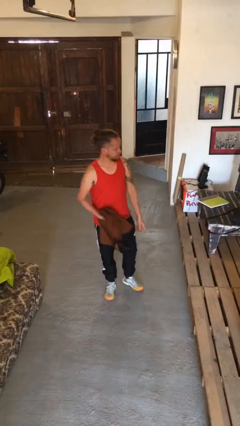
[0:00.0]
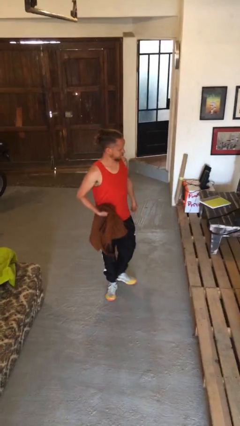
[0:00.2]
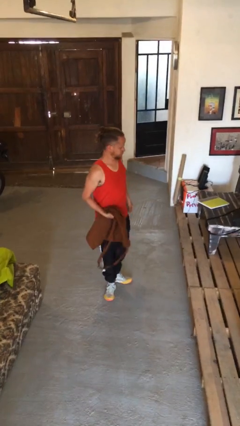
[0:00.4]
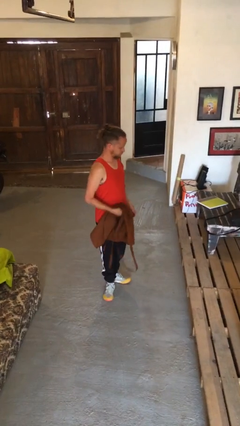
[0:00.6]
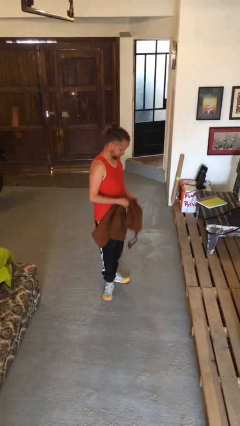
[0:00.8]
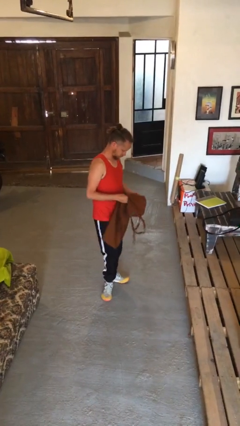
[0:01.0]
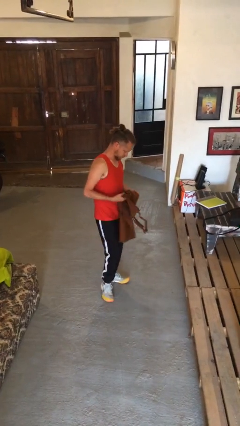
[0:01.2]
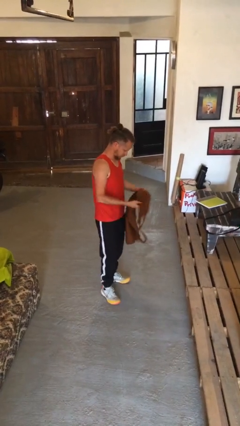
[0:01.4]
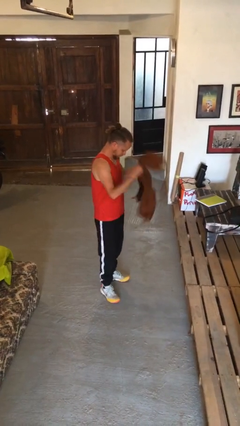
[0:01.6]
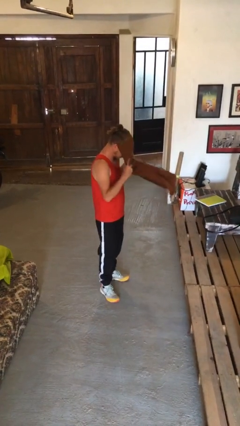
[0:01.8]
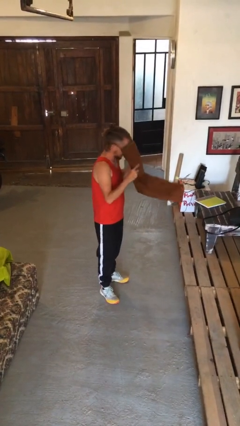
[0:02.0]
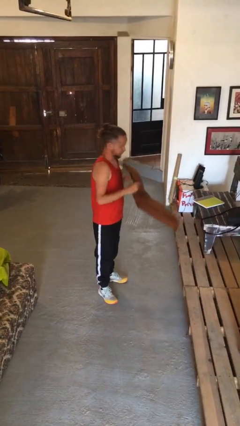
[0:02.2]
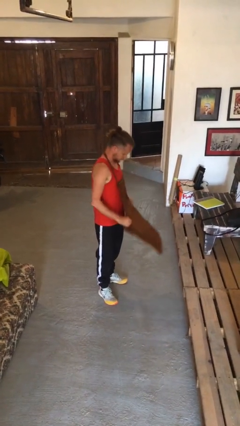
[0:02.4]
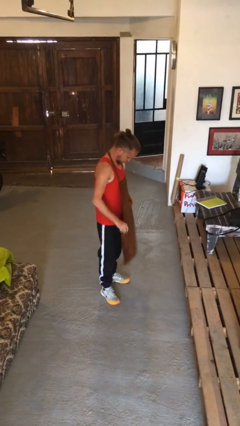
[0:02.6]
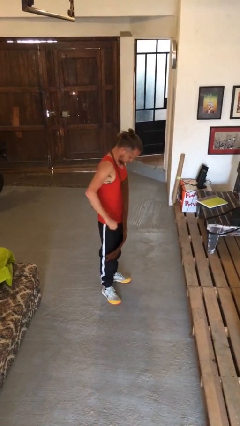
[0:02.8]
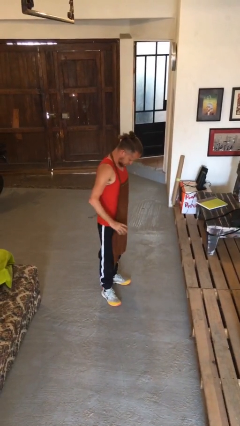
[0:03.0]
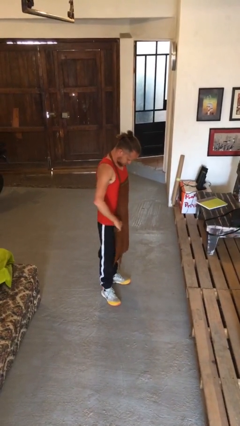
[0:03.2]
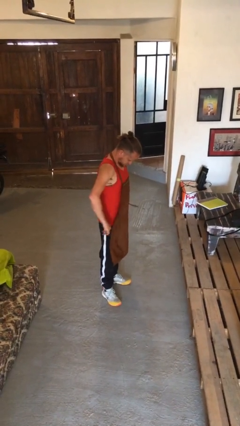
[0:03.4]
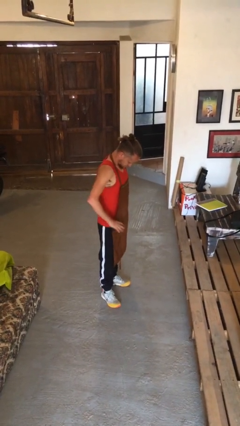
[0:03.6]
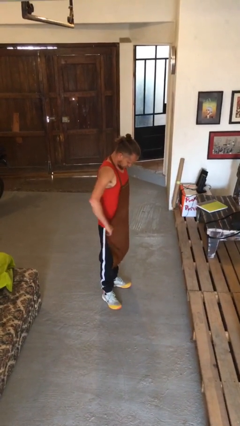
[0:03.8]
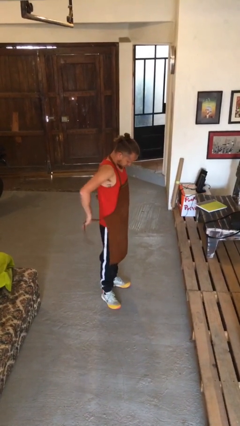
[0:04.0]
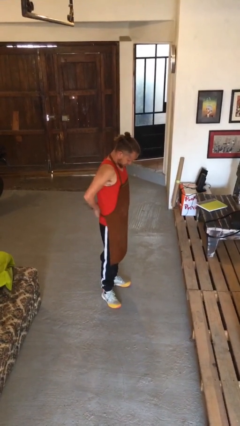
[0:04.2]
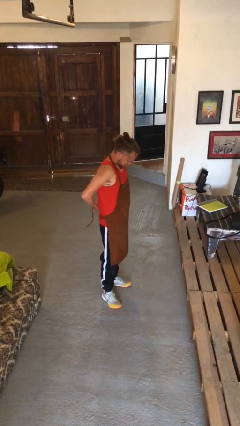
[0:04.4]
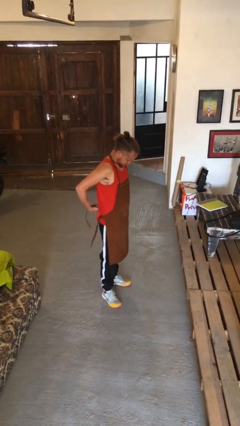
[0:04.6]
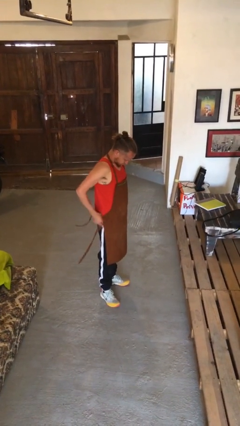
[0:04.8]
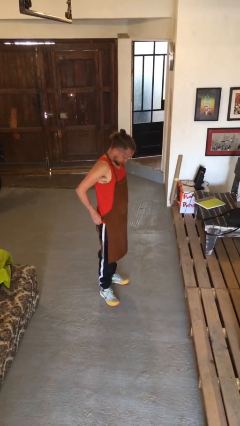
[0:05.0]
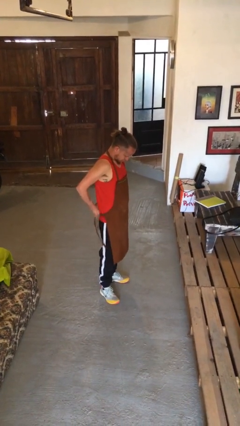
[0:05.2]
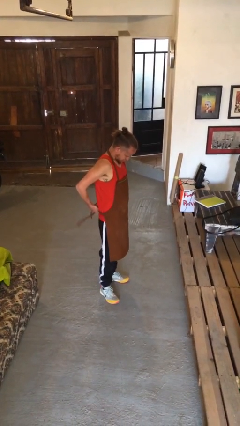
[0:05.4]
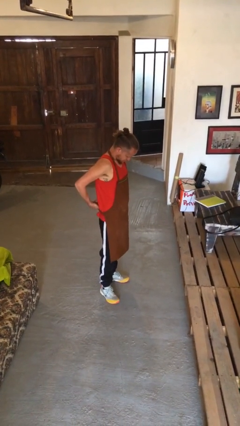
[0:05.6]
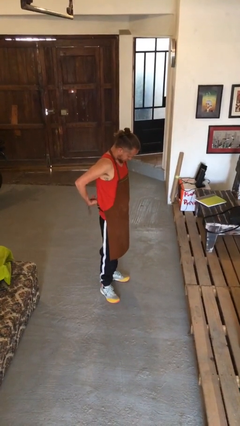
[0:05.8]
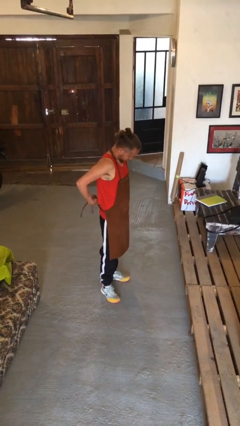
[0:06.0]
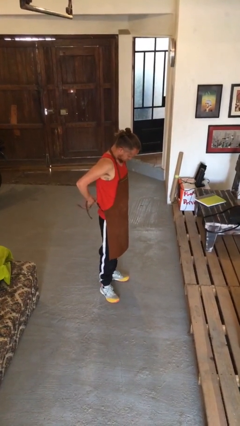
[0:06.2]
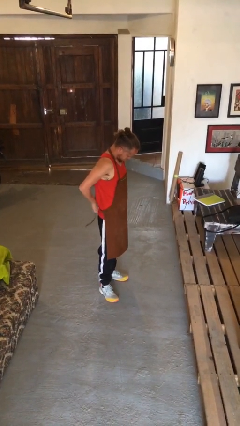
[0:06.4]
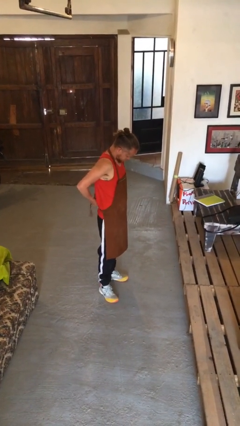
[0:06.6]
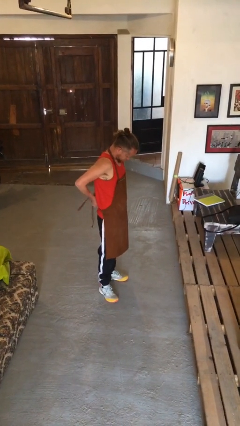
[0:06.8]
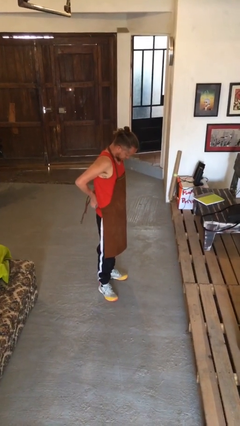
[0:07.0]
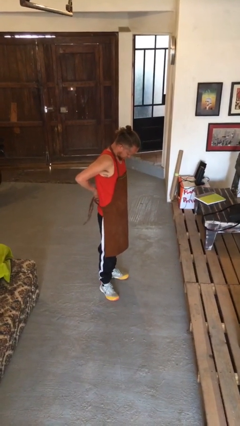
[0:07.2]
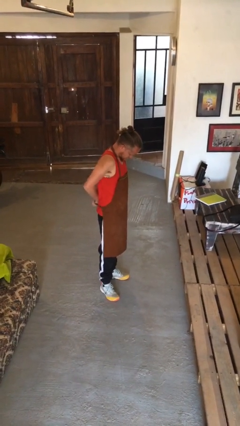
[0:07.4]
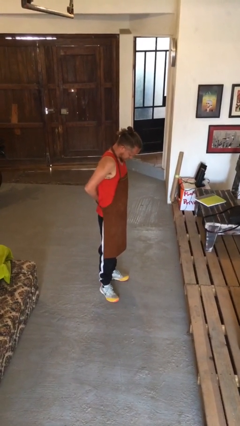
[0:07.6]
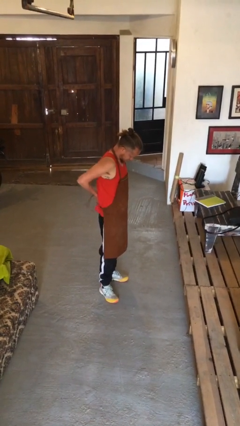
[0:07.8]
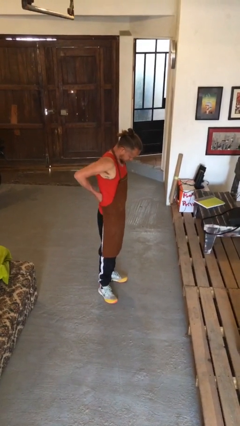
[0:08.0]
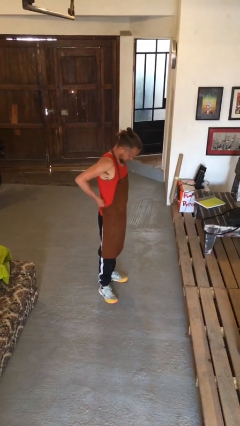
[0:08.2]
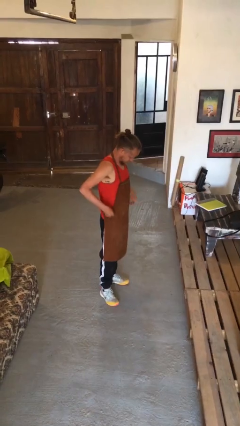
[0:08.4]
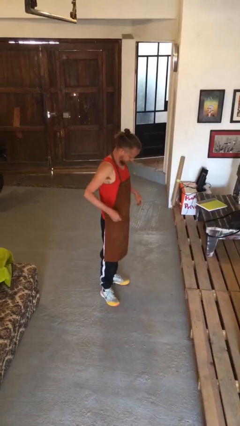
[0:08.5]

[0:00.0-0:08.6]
person puts on apron

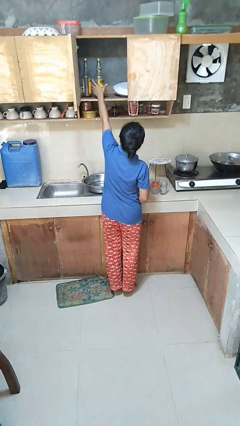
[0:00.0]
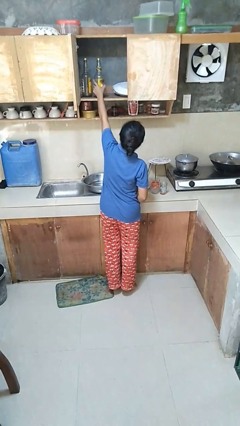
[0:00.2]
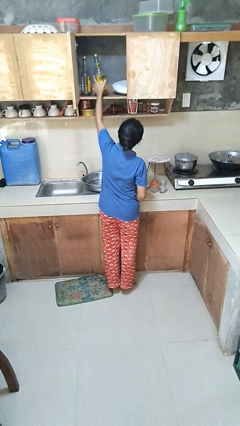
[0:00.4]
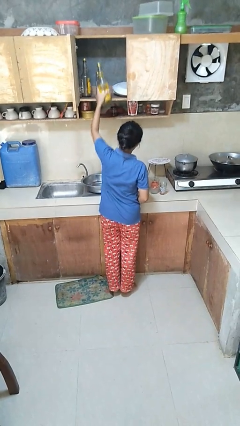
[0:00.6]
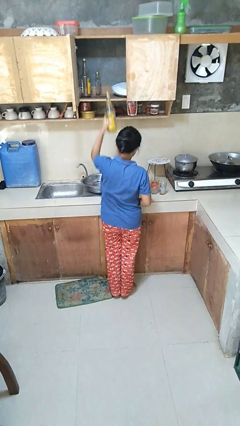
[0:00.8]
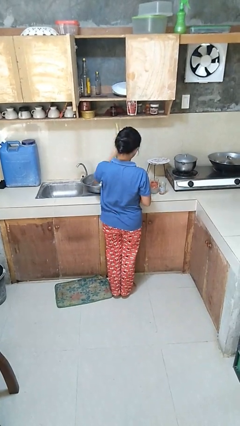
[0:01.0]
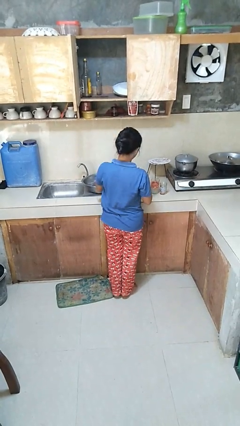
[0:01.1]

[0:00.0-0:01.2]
person takes object from cabinet

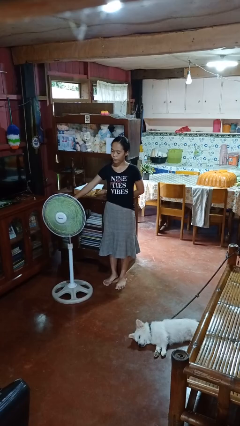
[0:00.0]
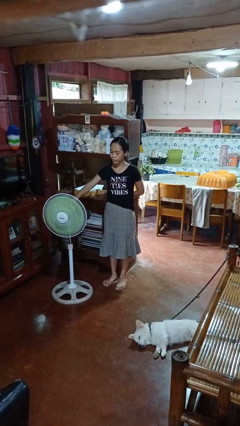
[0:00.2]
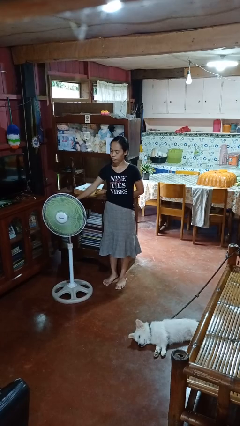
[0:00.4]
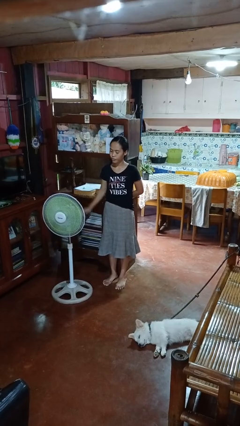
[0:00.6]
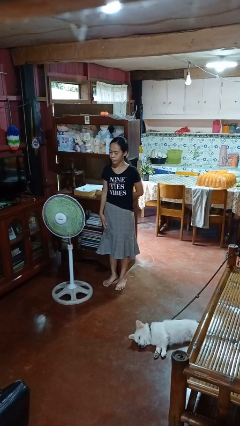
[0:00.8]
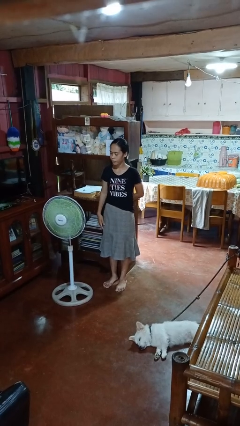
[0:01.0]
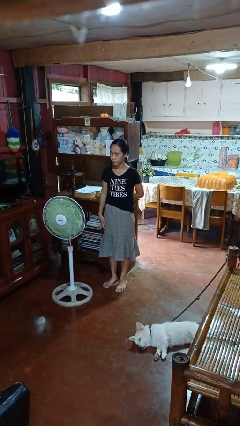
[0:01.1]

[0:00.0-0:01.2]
person turns off fan

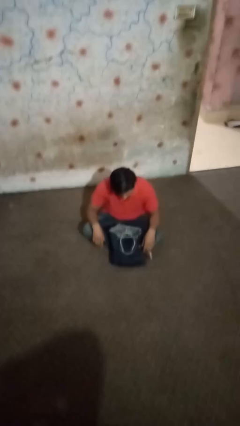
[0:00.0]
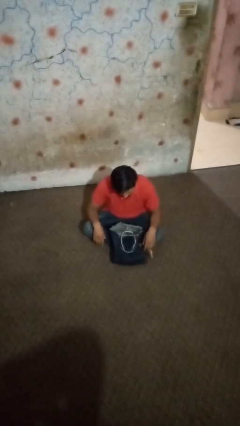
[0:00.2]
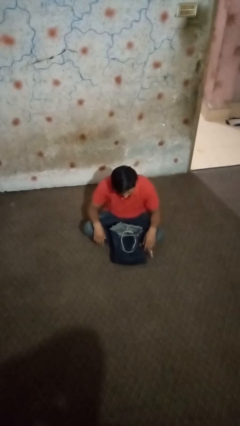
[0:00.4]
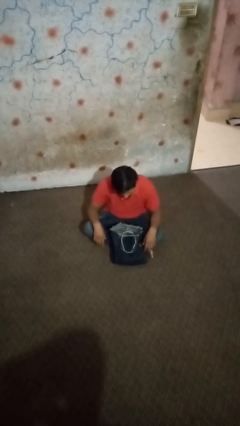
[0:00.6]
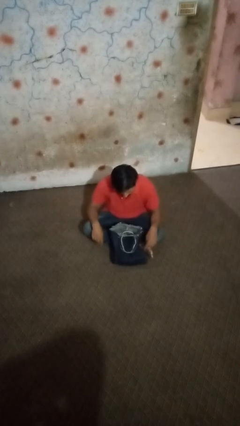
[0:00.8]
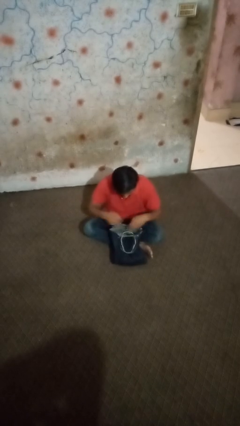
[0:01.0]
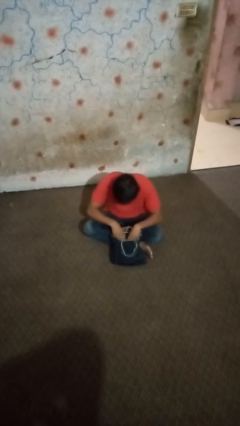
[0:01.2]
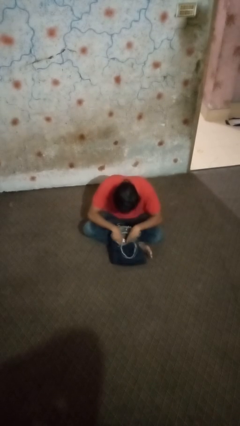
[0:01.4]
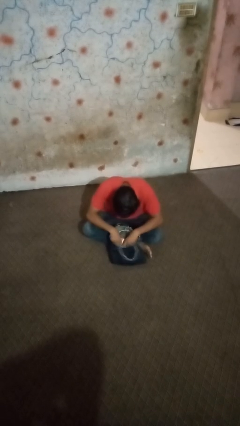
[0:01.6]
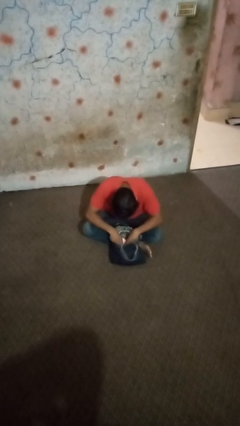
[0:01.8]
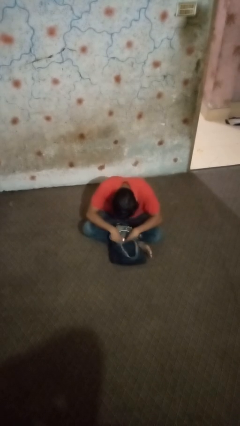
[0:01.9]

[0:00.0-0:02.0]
person searches in bag

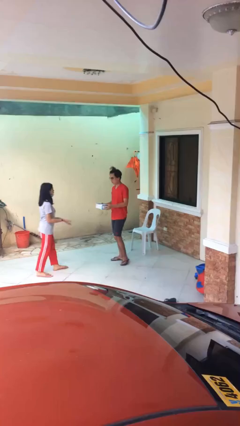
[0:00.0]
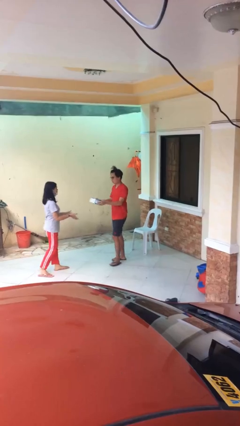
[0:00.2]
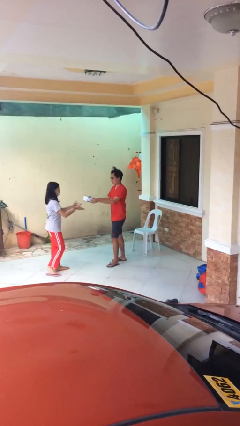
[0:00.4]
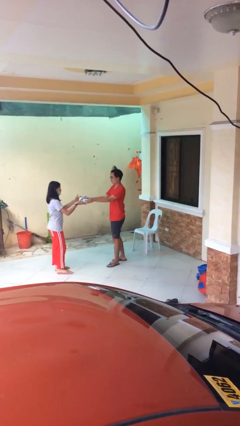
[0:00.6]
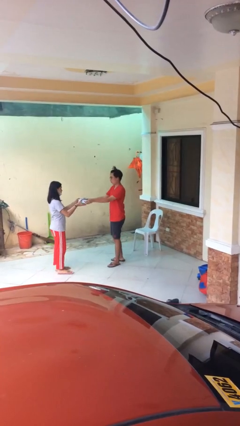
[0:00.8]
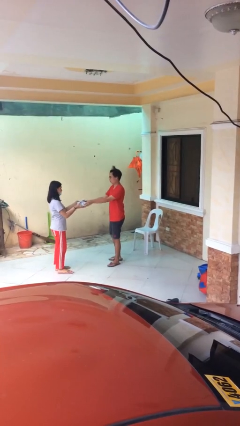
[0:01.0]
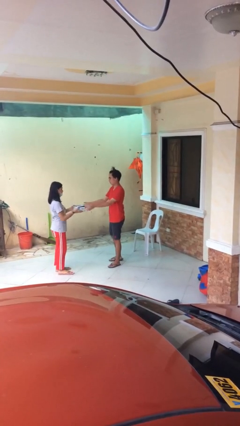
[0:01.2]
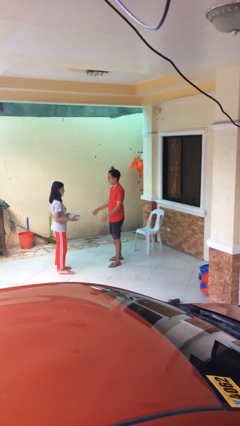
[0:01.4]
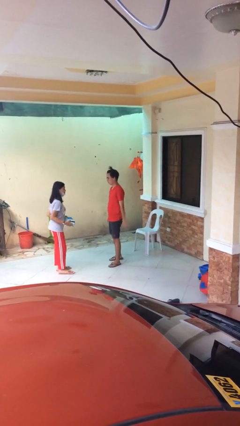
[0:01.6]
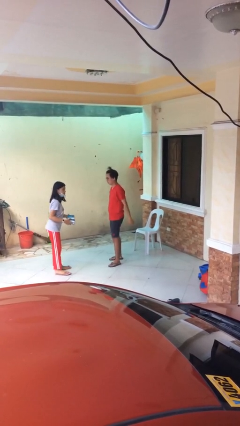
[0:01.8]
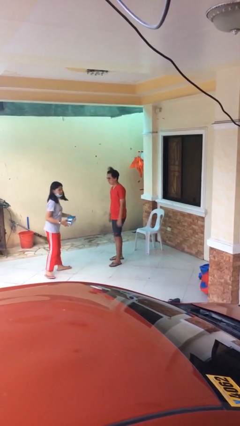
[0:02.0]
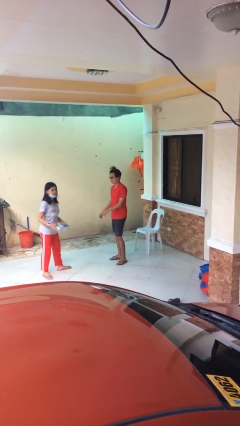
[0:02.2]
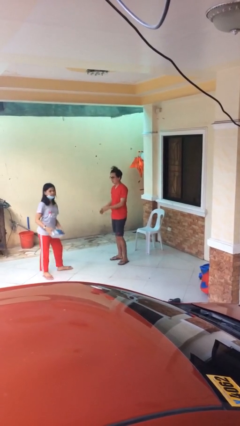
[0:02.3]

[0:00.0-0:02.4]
person transfers object to person

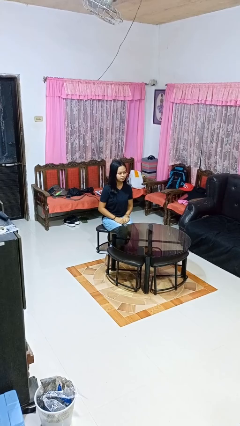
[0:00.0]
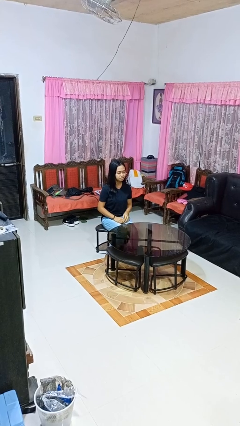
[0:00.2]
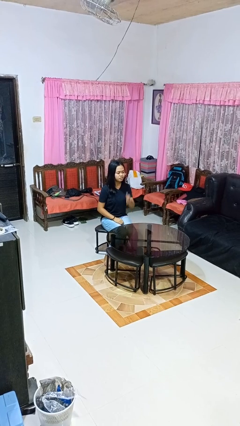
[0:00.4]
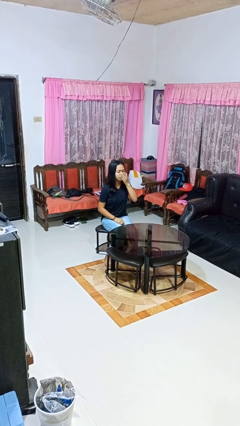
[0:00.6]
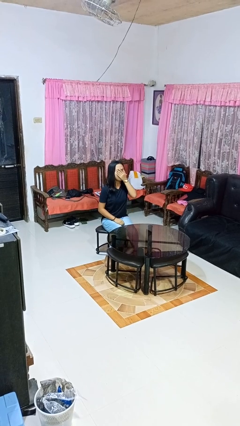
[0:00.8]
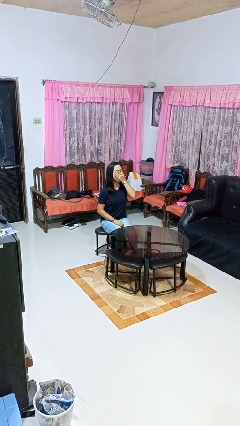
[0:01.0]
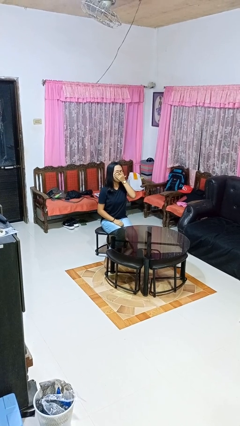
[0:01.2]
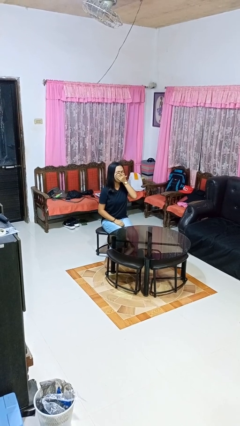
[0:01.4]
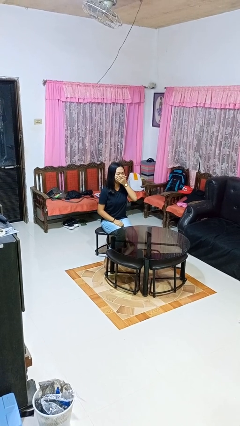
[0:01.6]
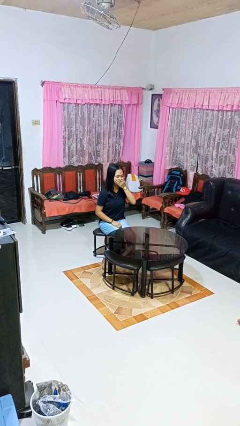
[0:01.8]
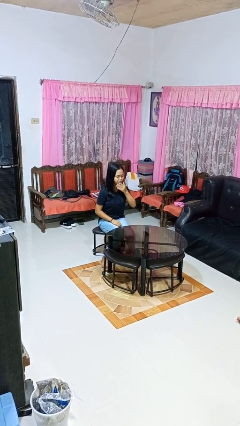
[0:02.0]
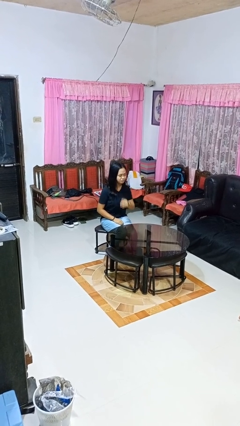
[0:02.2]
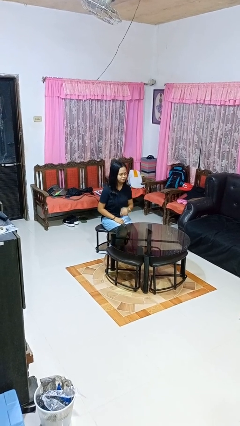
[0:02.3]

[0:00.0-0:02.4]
person yawns
